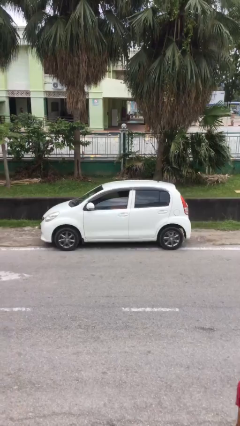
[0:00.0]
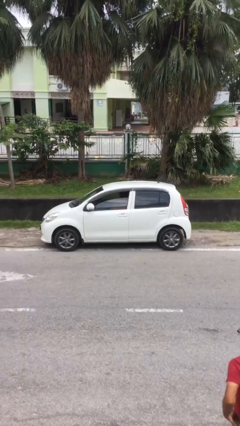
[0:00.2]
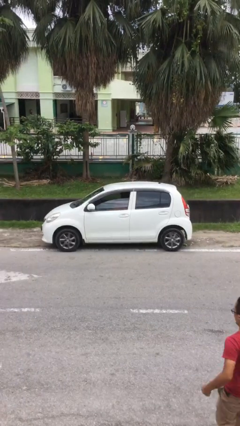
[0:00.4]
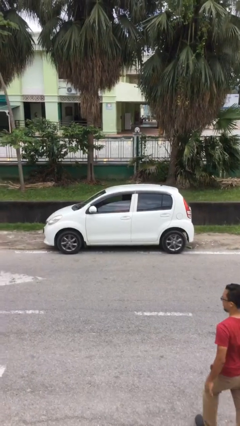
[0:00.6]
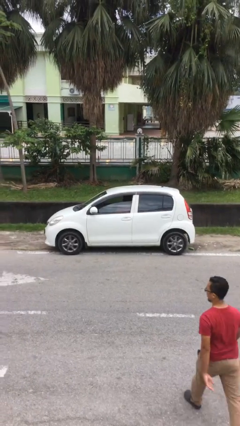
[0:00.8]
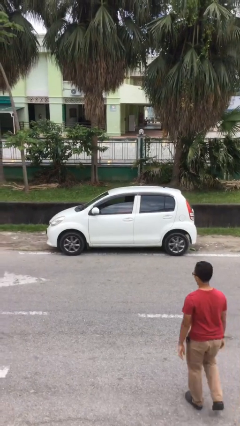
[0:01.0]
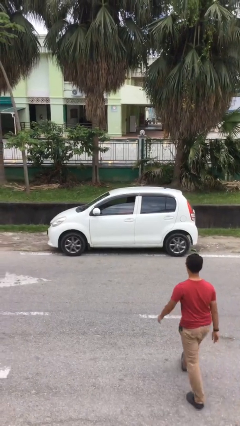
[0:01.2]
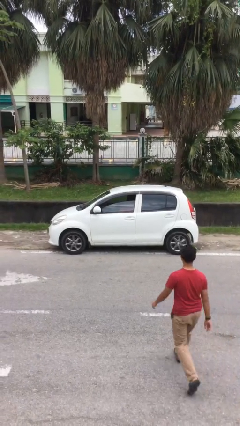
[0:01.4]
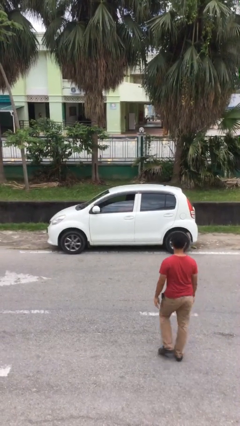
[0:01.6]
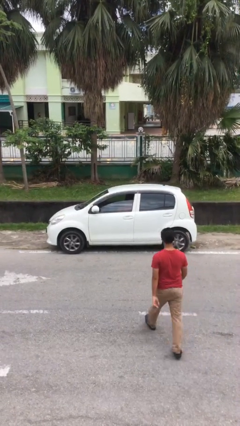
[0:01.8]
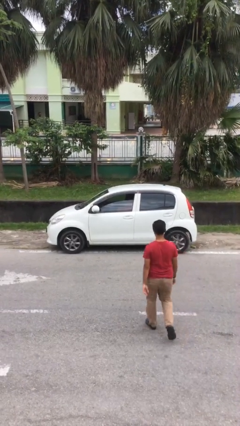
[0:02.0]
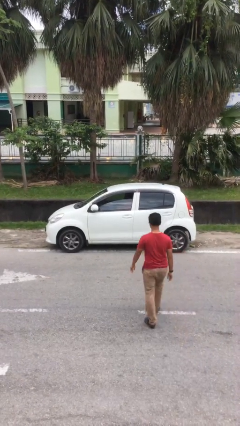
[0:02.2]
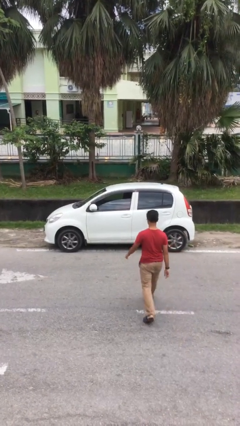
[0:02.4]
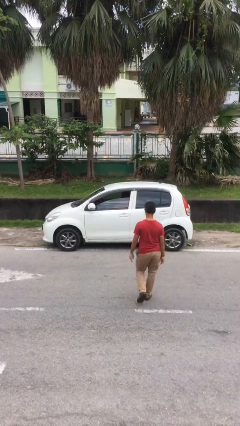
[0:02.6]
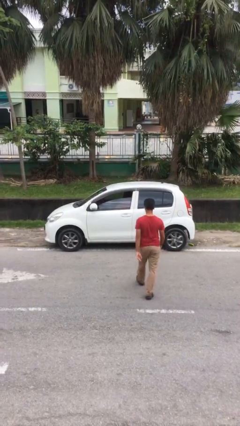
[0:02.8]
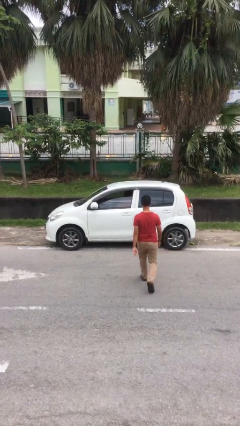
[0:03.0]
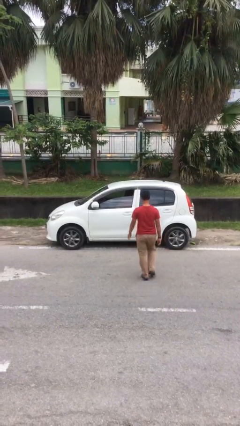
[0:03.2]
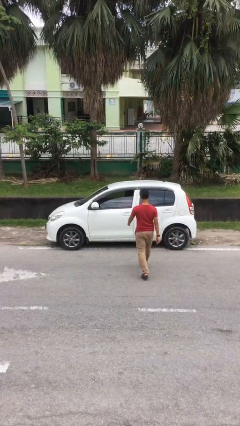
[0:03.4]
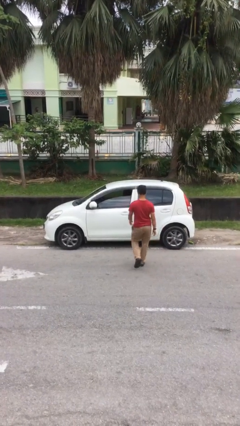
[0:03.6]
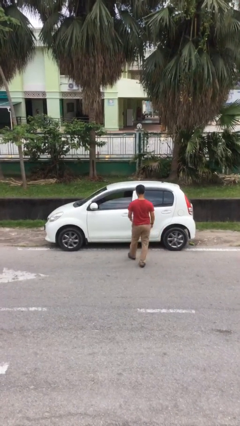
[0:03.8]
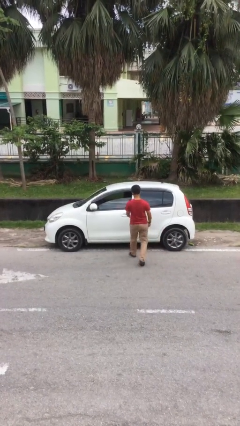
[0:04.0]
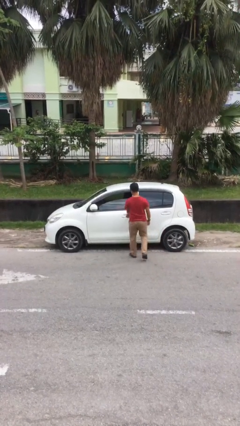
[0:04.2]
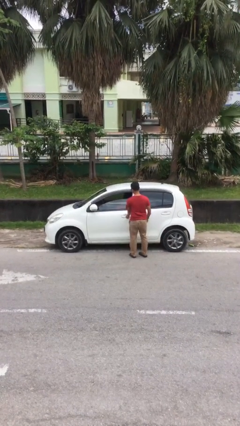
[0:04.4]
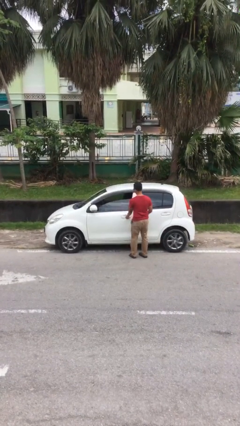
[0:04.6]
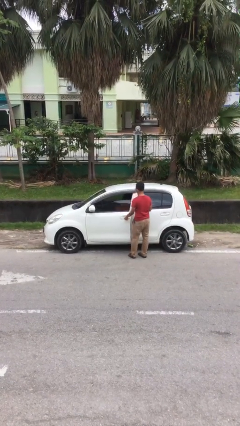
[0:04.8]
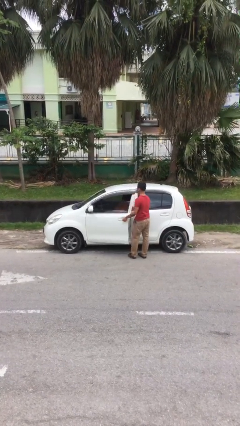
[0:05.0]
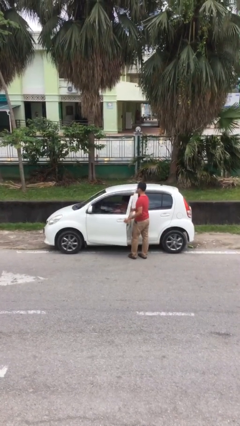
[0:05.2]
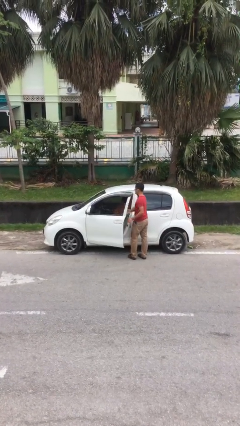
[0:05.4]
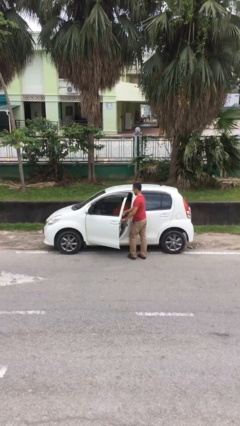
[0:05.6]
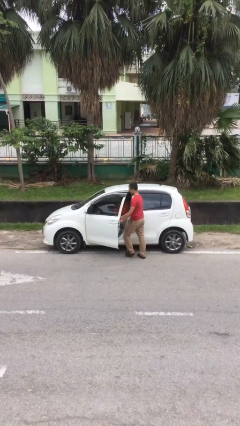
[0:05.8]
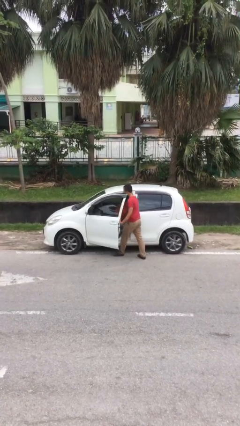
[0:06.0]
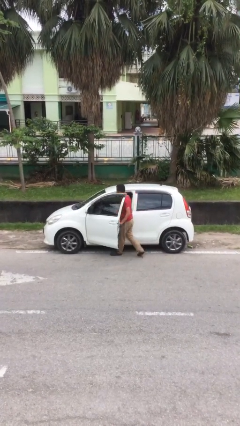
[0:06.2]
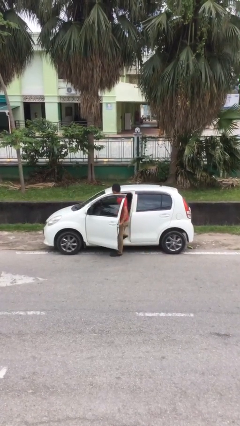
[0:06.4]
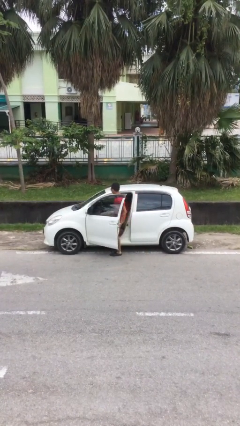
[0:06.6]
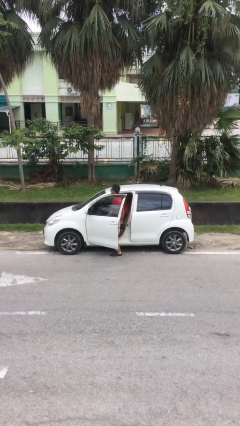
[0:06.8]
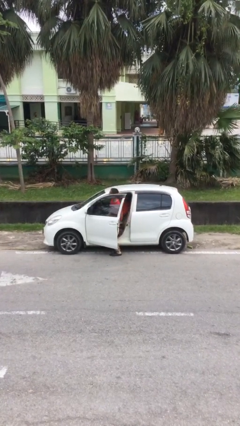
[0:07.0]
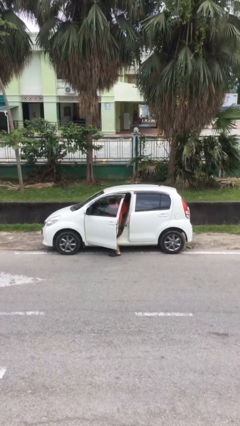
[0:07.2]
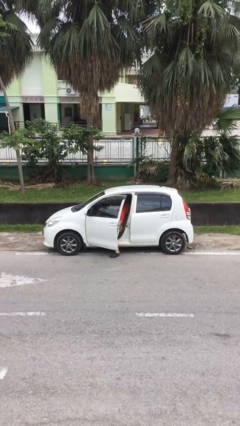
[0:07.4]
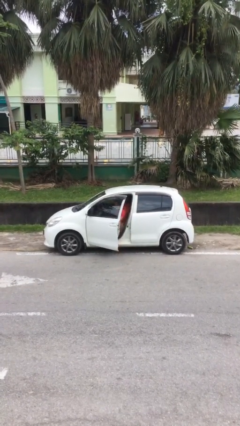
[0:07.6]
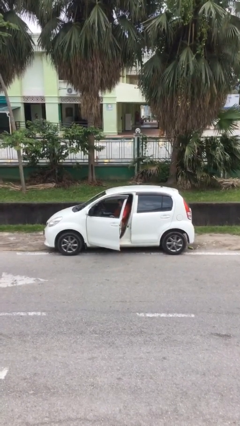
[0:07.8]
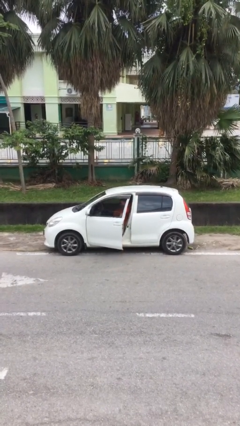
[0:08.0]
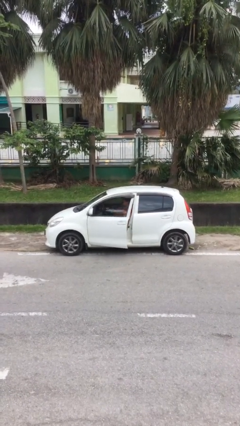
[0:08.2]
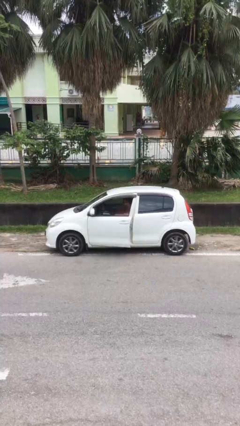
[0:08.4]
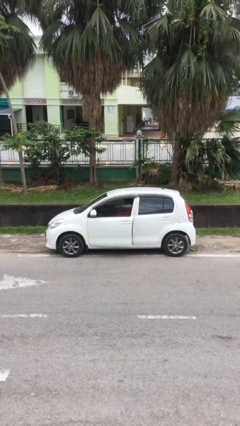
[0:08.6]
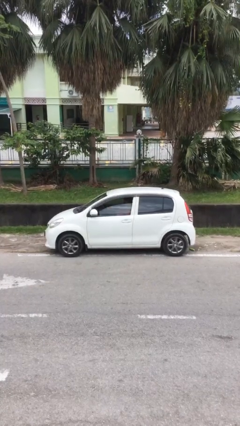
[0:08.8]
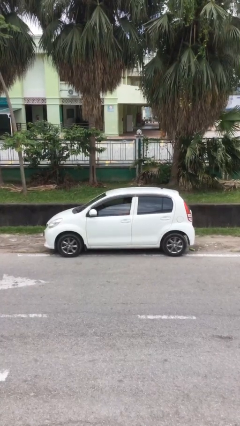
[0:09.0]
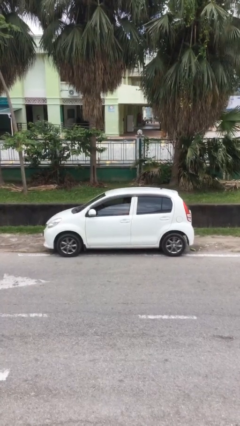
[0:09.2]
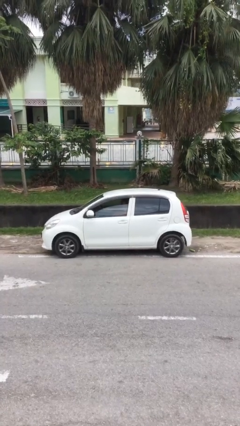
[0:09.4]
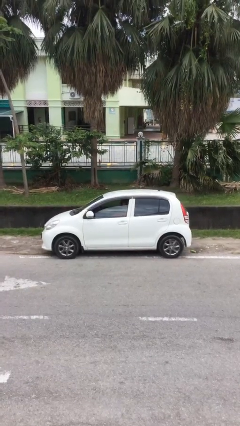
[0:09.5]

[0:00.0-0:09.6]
car picks up person

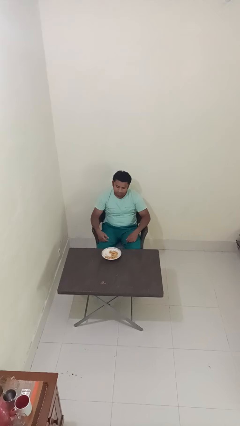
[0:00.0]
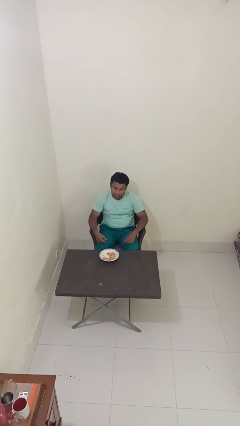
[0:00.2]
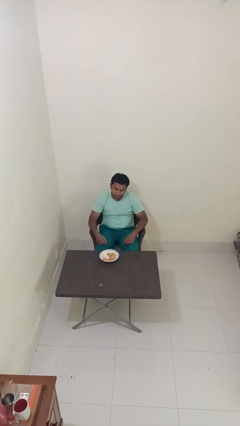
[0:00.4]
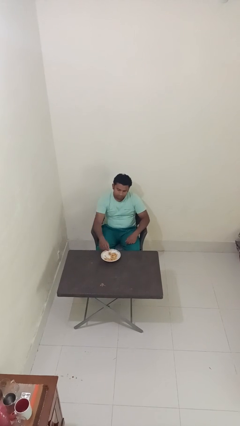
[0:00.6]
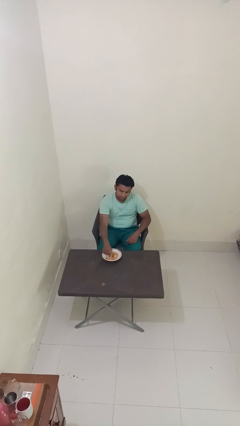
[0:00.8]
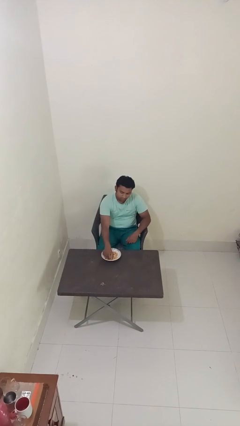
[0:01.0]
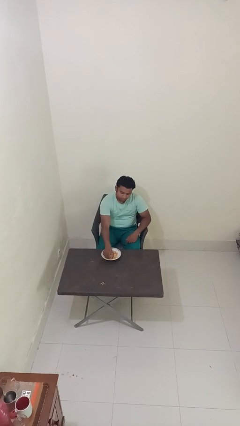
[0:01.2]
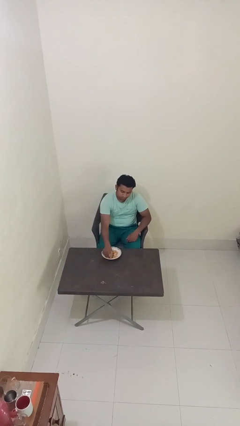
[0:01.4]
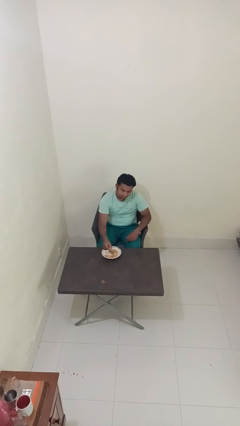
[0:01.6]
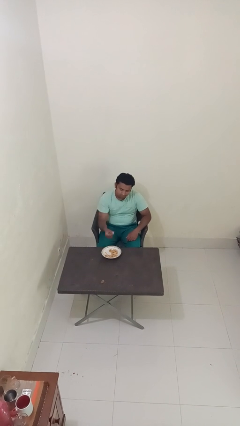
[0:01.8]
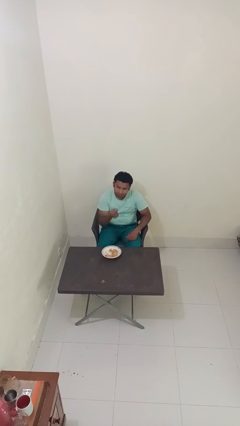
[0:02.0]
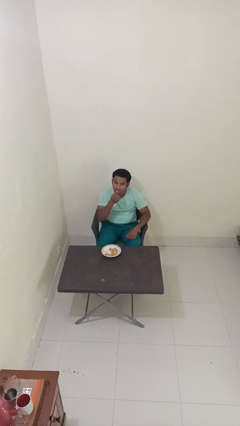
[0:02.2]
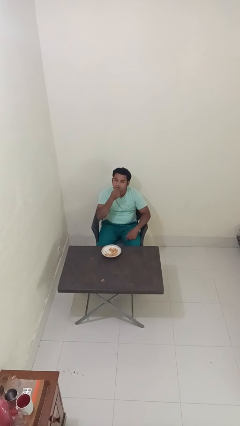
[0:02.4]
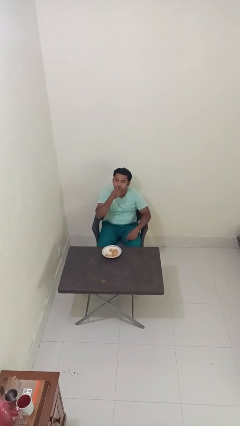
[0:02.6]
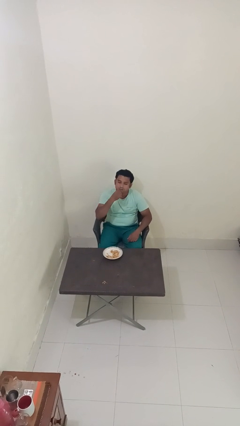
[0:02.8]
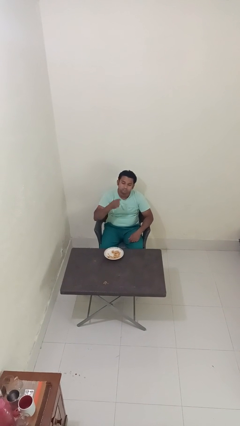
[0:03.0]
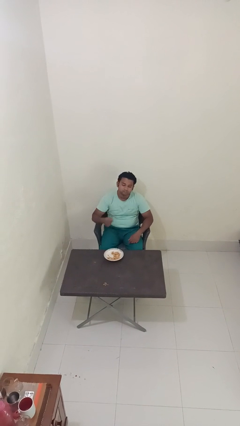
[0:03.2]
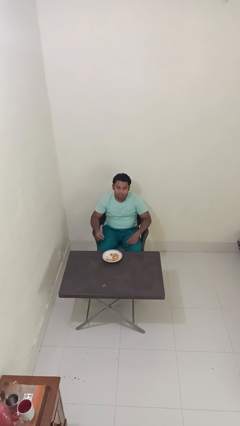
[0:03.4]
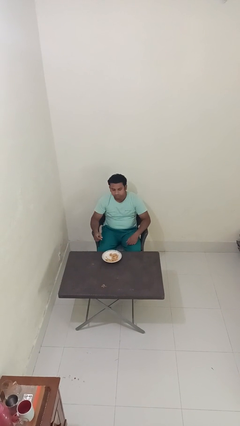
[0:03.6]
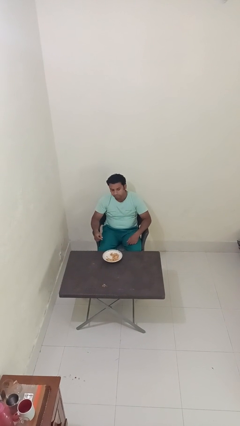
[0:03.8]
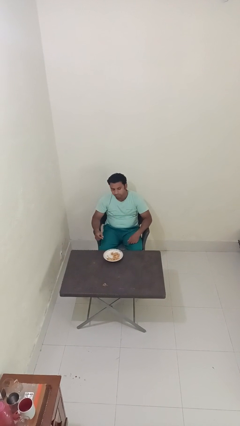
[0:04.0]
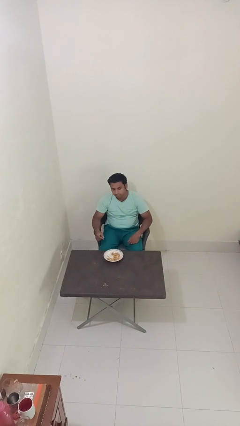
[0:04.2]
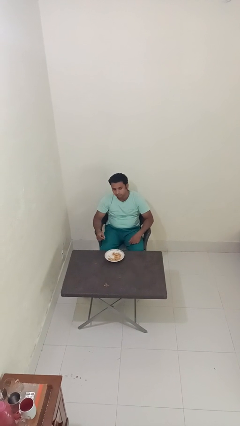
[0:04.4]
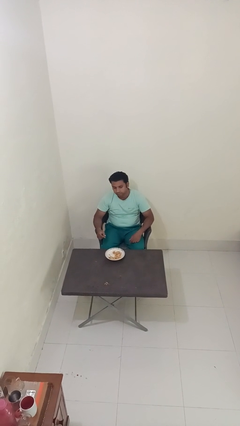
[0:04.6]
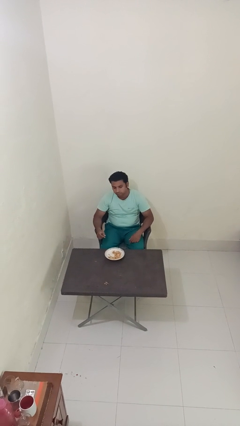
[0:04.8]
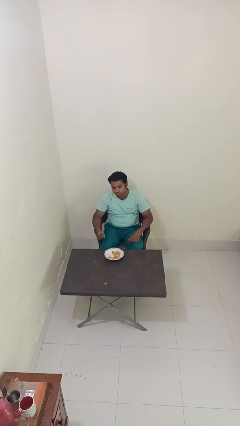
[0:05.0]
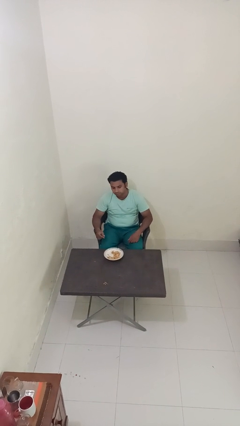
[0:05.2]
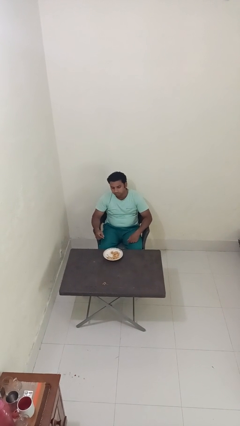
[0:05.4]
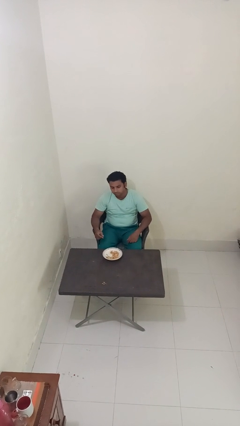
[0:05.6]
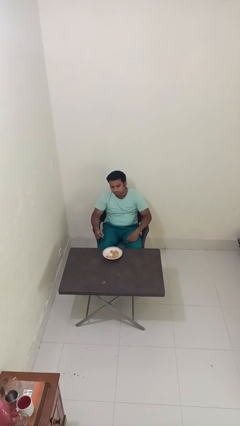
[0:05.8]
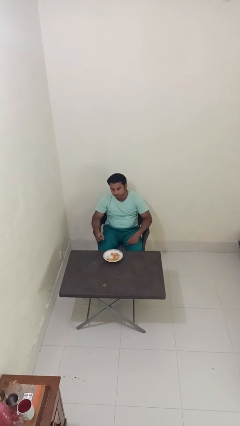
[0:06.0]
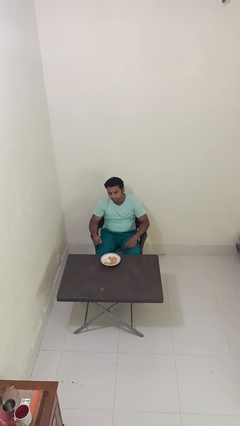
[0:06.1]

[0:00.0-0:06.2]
person eats with hands

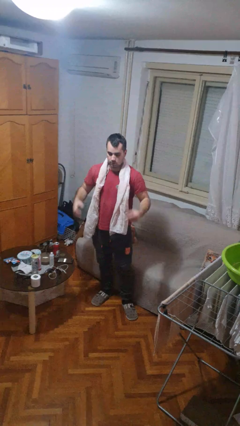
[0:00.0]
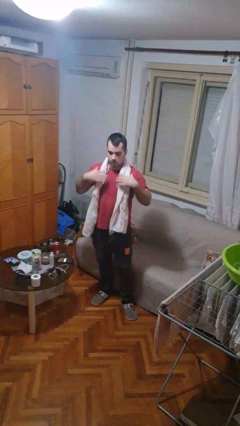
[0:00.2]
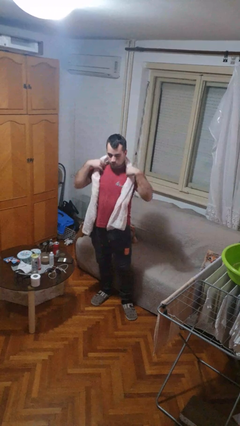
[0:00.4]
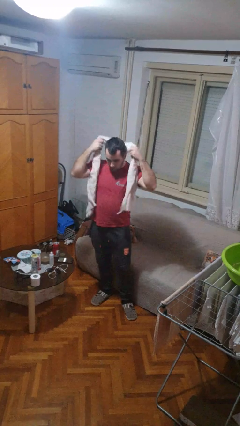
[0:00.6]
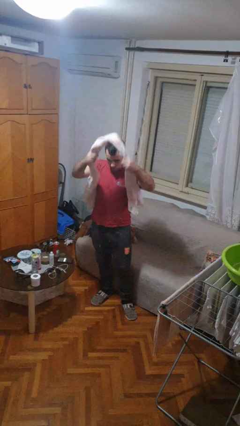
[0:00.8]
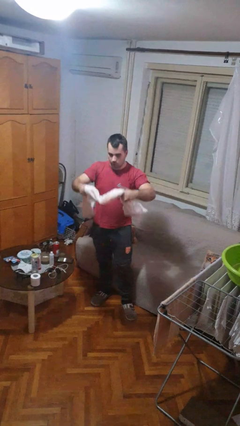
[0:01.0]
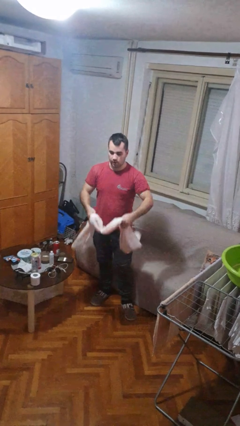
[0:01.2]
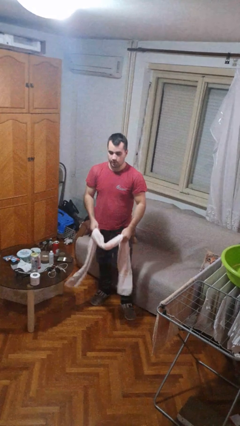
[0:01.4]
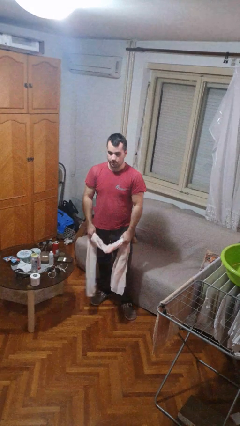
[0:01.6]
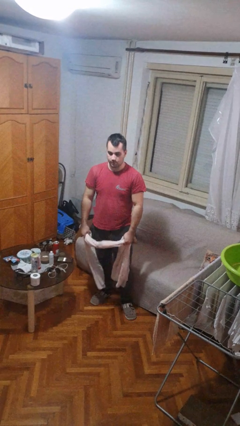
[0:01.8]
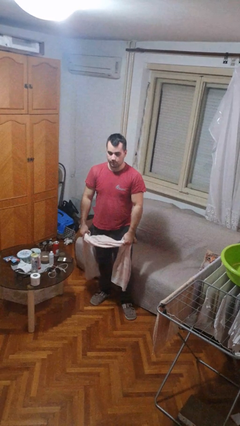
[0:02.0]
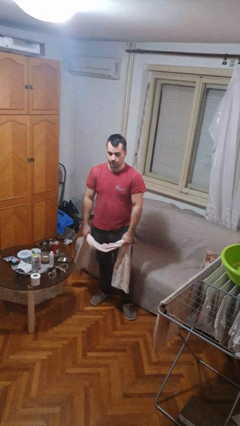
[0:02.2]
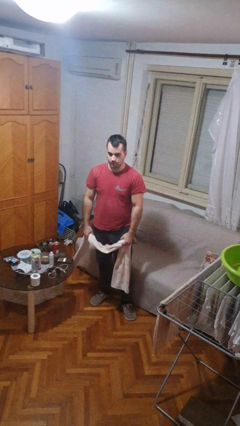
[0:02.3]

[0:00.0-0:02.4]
person takes off scarf
